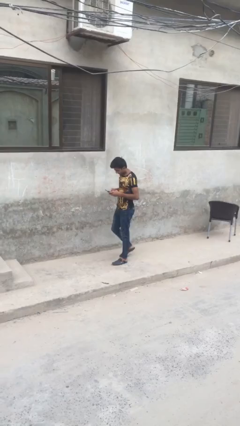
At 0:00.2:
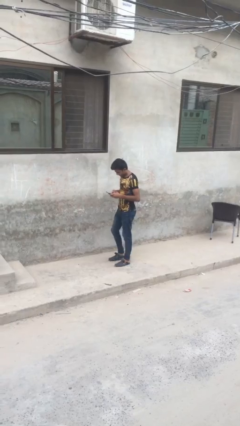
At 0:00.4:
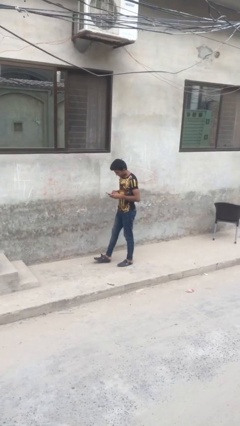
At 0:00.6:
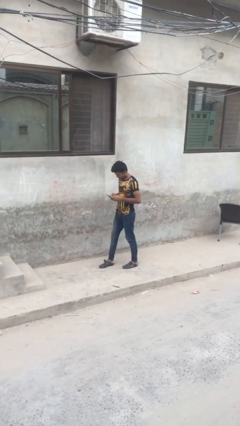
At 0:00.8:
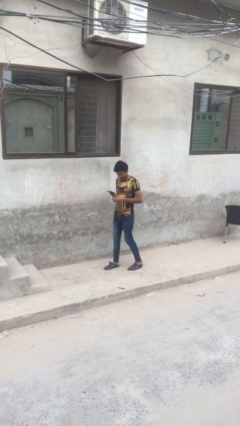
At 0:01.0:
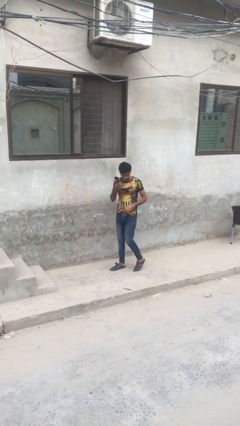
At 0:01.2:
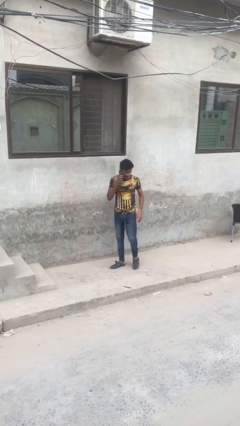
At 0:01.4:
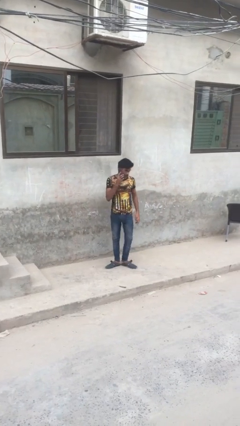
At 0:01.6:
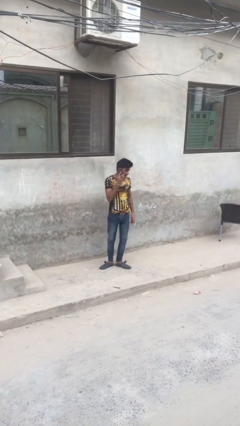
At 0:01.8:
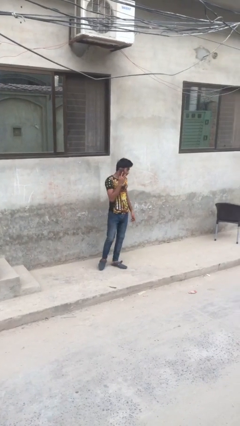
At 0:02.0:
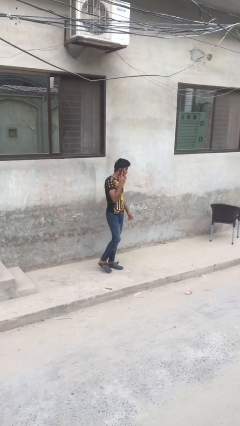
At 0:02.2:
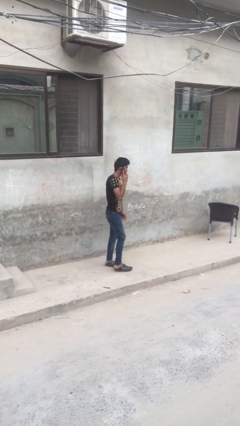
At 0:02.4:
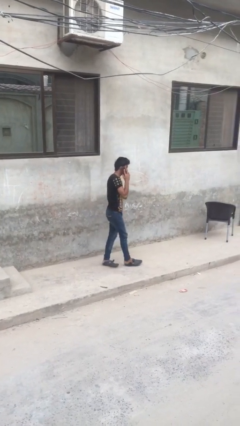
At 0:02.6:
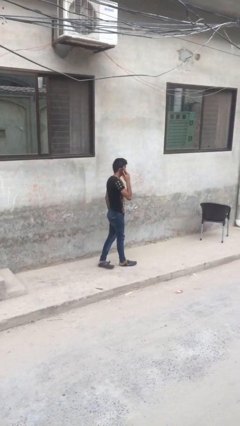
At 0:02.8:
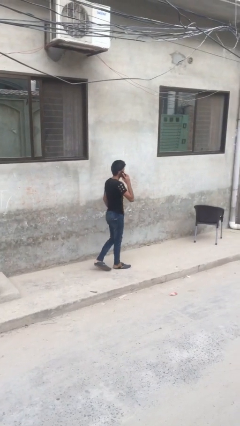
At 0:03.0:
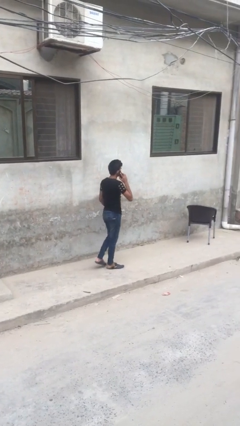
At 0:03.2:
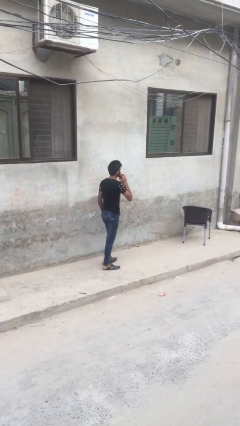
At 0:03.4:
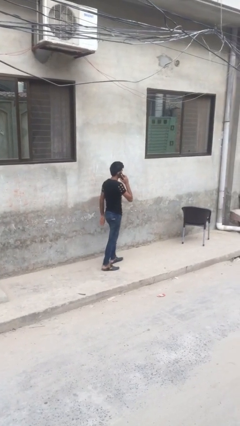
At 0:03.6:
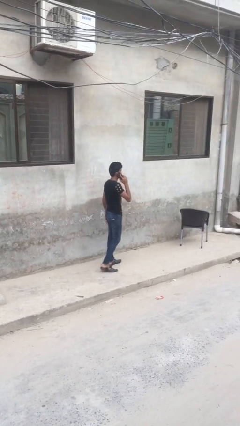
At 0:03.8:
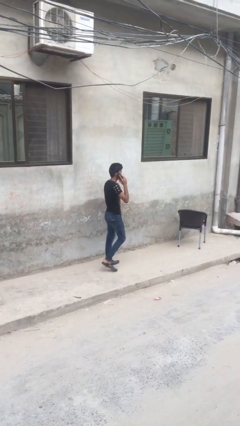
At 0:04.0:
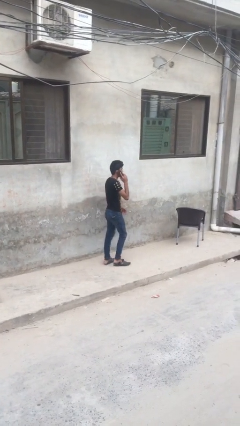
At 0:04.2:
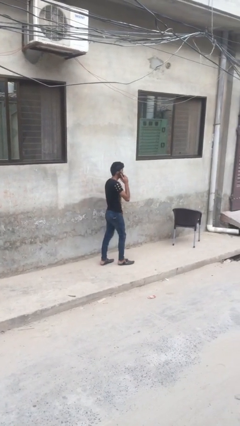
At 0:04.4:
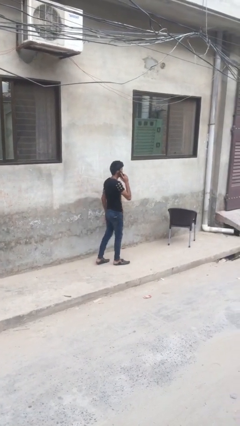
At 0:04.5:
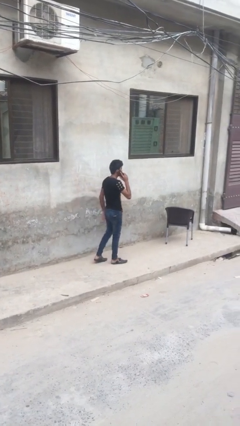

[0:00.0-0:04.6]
person talks on phone

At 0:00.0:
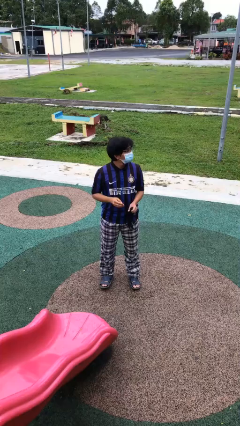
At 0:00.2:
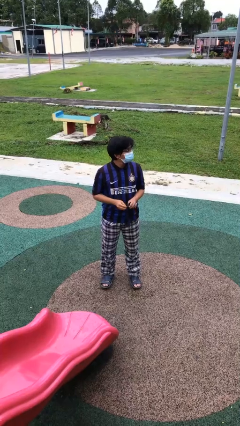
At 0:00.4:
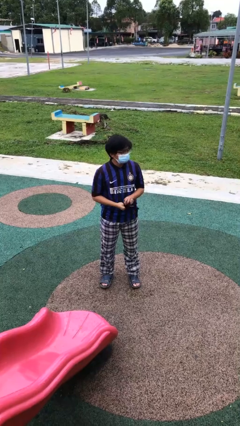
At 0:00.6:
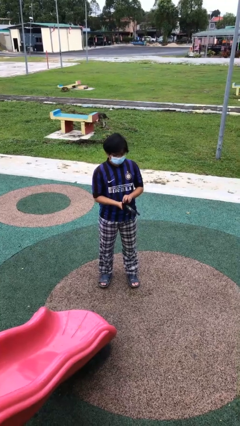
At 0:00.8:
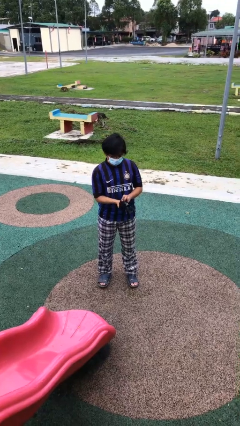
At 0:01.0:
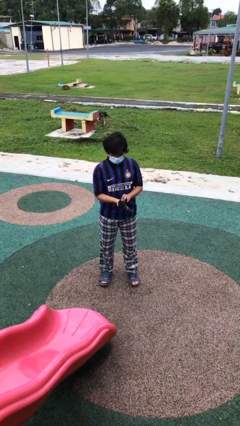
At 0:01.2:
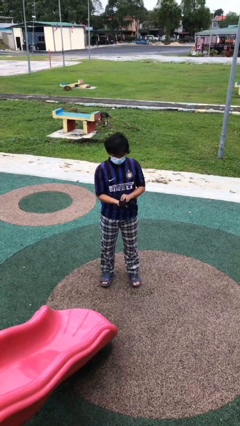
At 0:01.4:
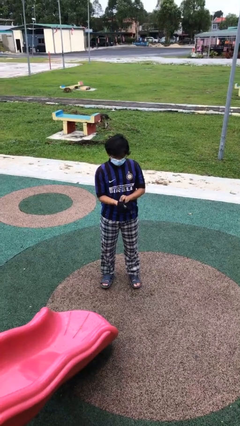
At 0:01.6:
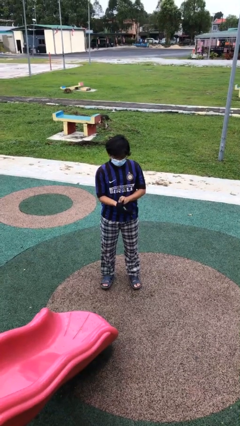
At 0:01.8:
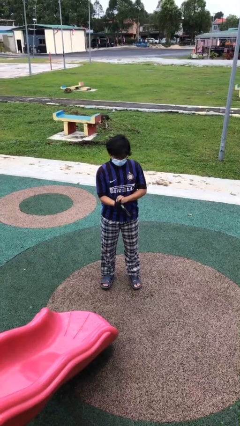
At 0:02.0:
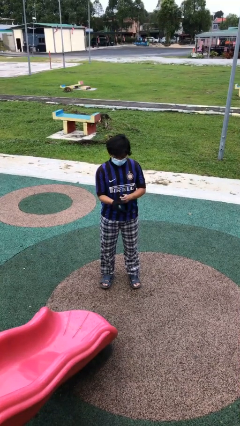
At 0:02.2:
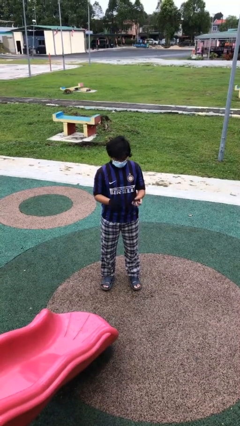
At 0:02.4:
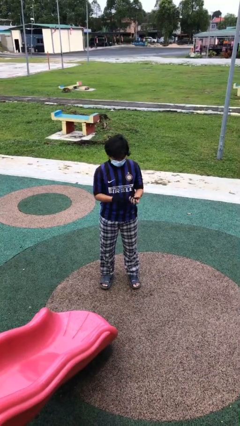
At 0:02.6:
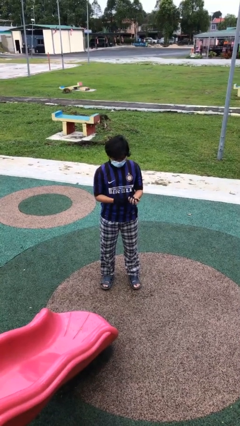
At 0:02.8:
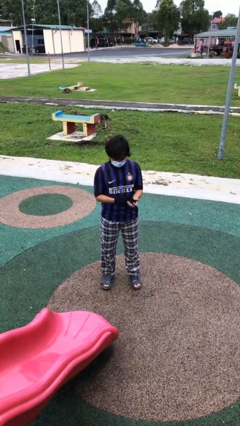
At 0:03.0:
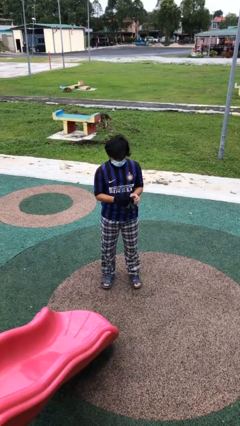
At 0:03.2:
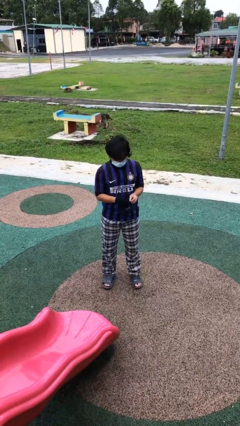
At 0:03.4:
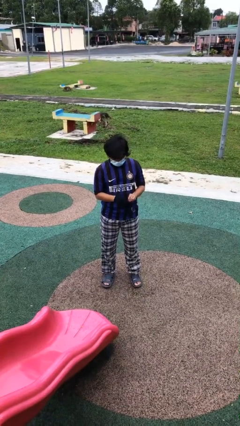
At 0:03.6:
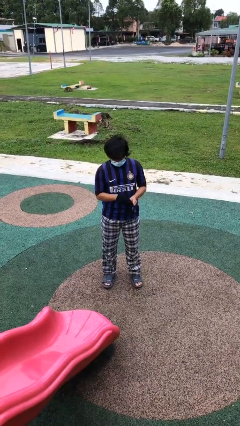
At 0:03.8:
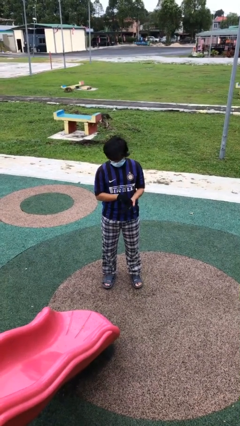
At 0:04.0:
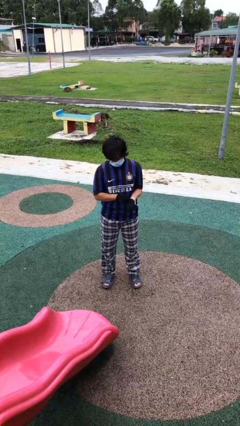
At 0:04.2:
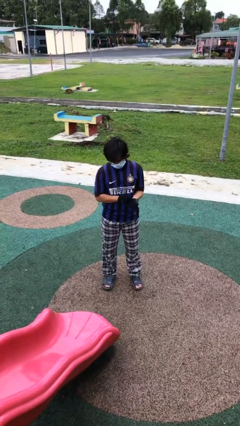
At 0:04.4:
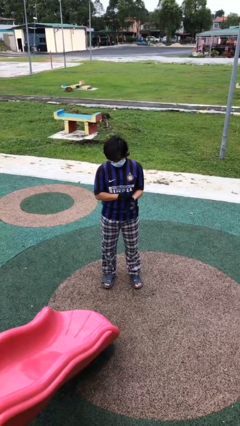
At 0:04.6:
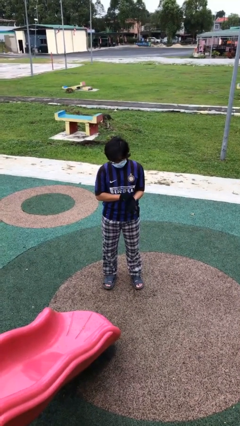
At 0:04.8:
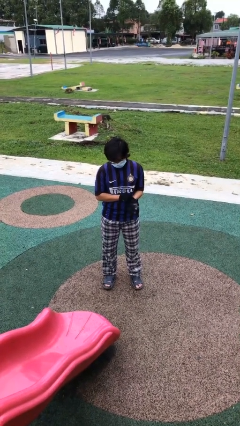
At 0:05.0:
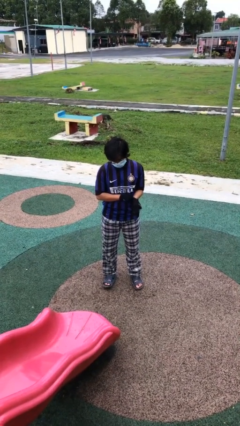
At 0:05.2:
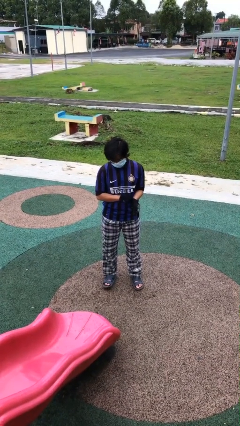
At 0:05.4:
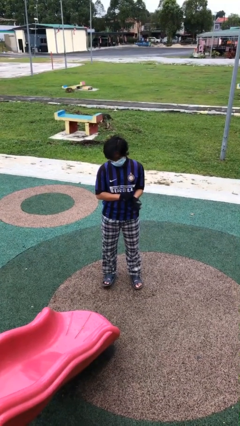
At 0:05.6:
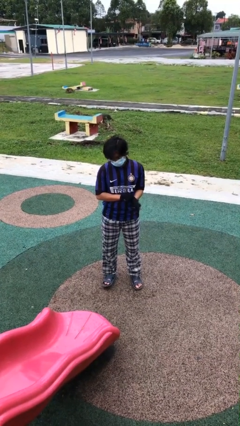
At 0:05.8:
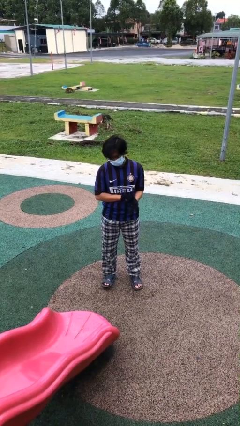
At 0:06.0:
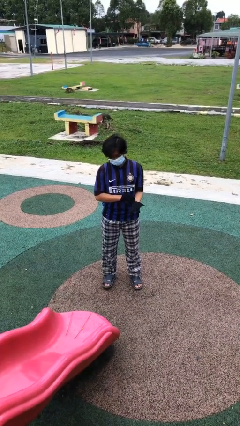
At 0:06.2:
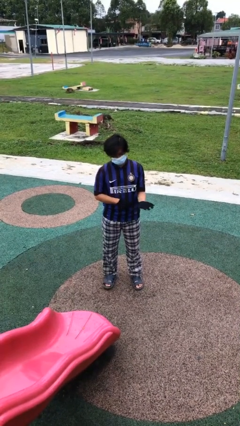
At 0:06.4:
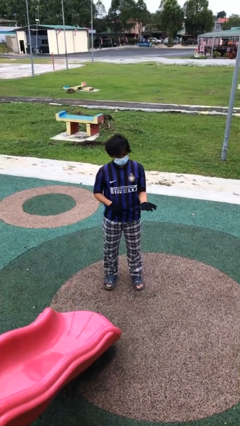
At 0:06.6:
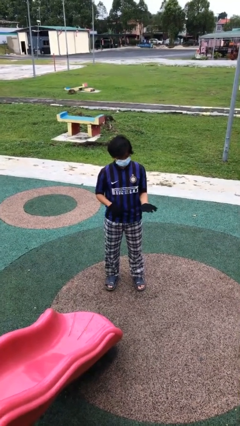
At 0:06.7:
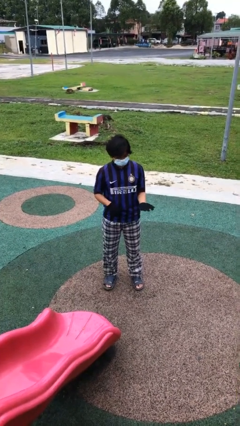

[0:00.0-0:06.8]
person puts on gloves

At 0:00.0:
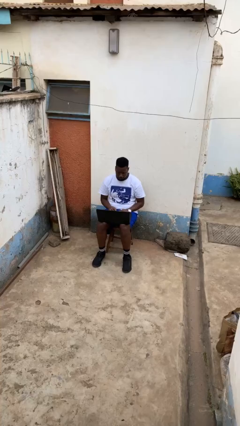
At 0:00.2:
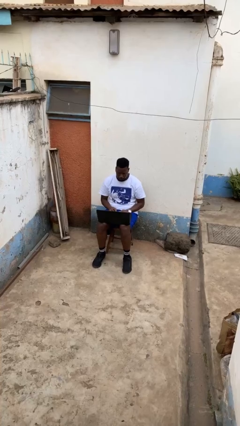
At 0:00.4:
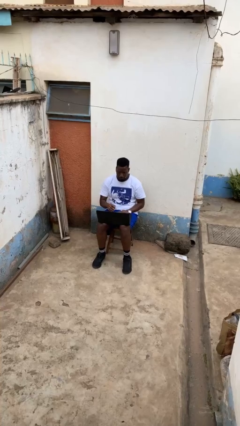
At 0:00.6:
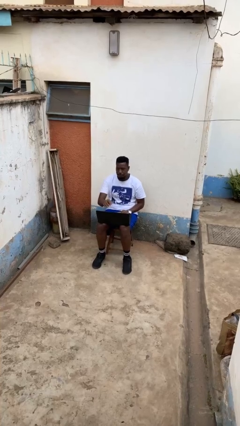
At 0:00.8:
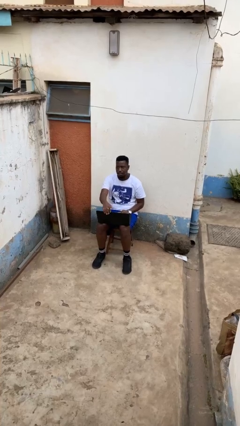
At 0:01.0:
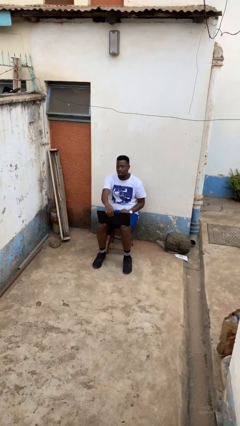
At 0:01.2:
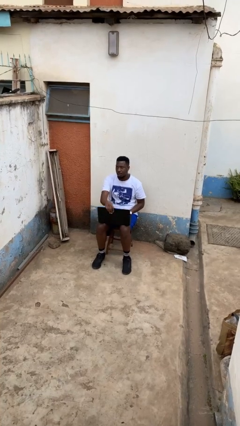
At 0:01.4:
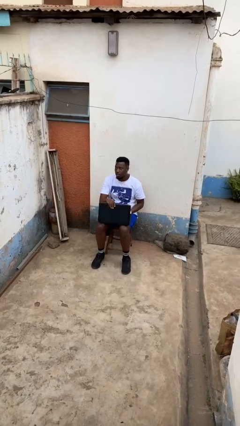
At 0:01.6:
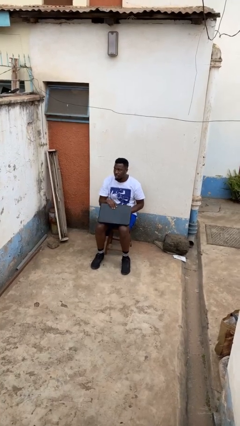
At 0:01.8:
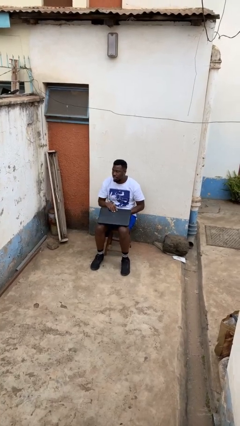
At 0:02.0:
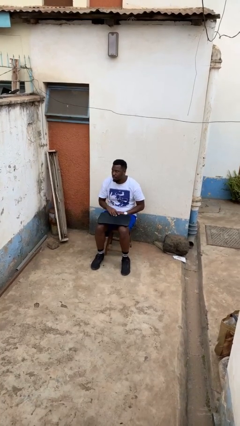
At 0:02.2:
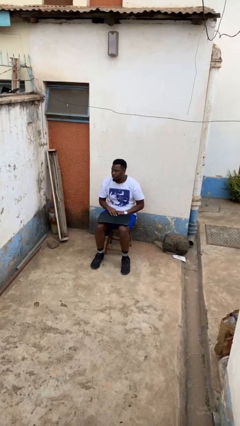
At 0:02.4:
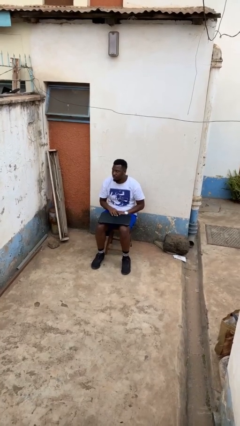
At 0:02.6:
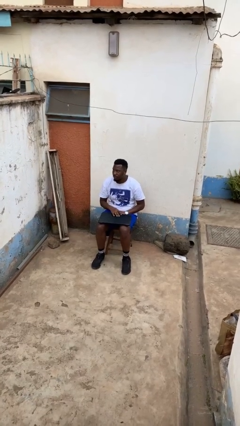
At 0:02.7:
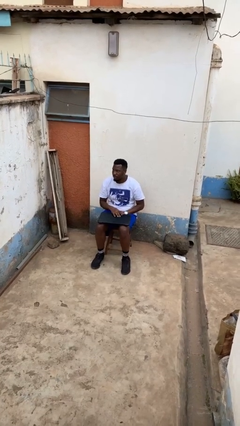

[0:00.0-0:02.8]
person closes laptop

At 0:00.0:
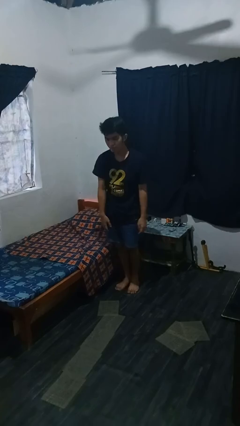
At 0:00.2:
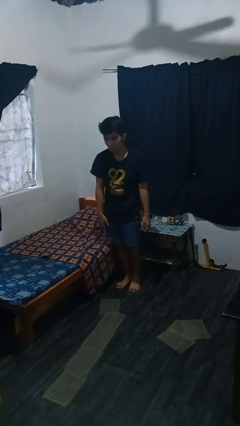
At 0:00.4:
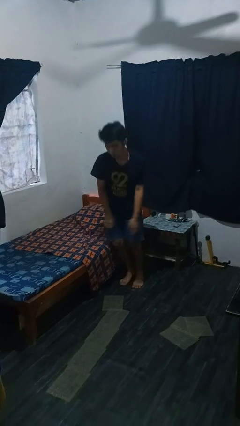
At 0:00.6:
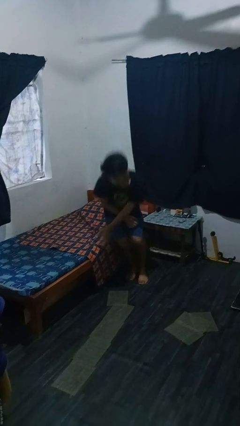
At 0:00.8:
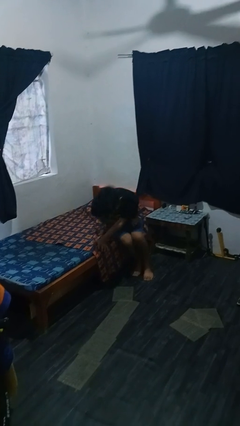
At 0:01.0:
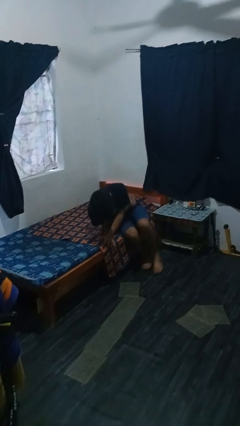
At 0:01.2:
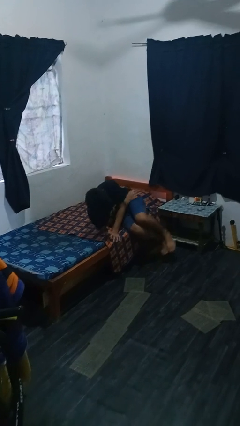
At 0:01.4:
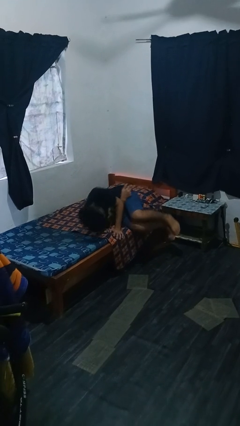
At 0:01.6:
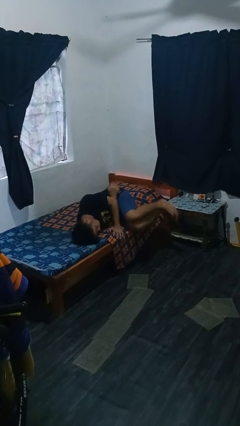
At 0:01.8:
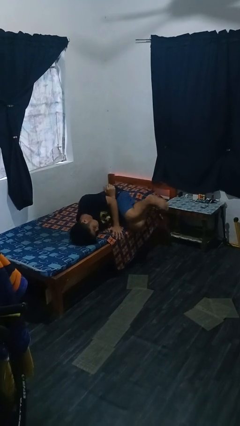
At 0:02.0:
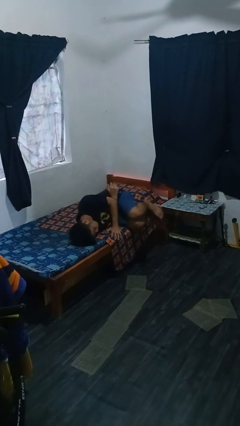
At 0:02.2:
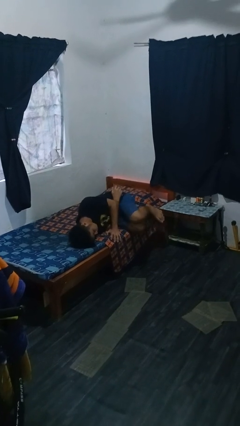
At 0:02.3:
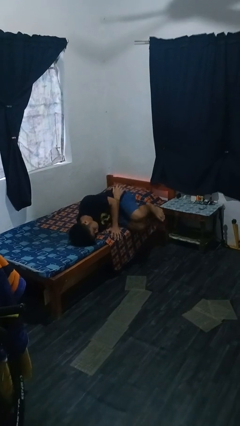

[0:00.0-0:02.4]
person lies down on bed

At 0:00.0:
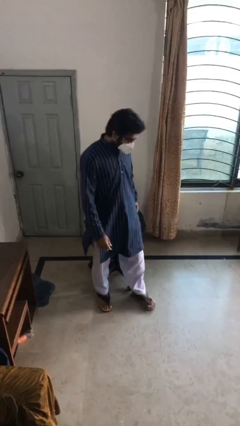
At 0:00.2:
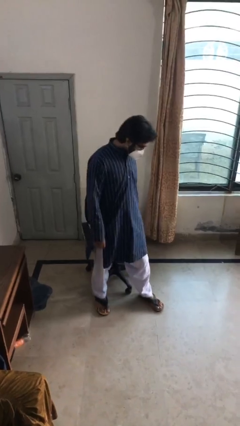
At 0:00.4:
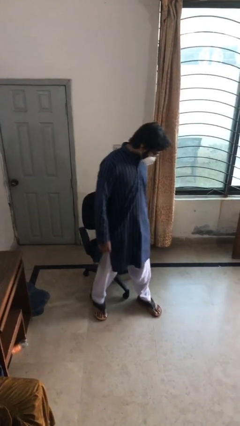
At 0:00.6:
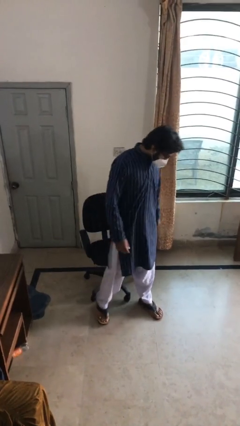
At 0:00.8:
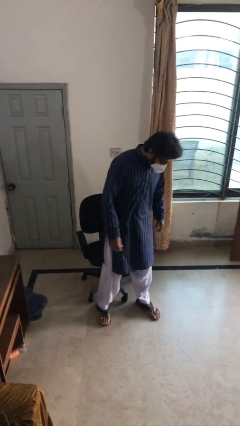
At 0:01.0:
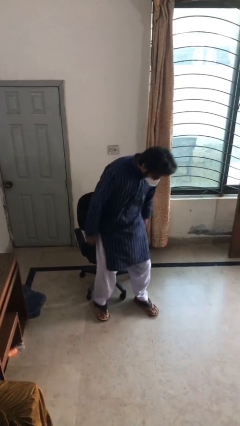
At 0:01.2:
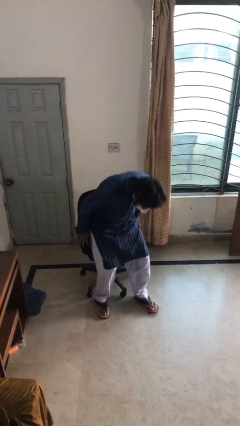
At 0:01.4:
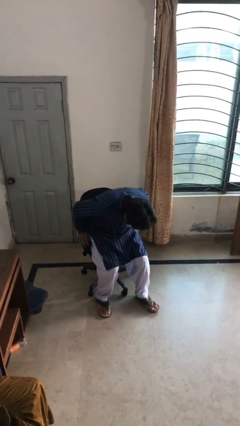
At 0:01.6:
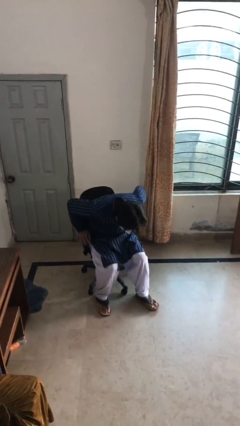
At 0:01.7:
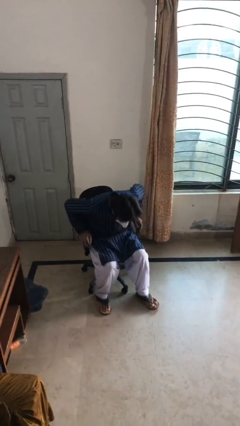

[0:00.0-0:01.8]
person sits down
